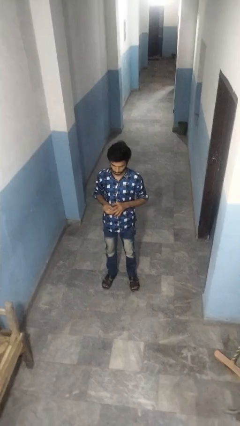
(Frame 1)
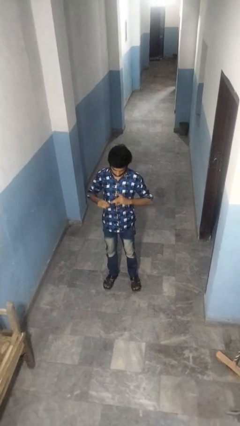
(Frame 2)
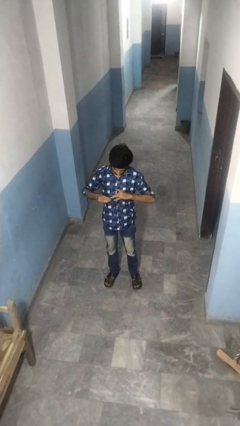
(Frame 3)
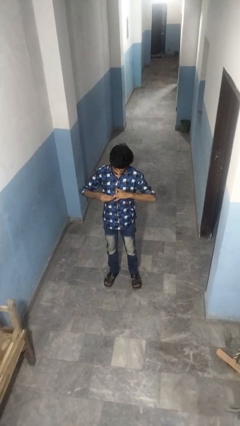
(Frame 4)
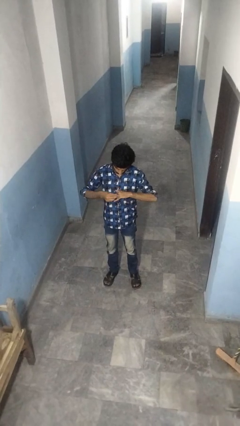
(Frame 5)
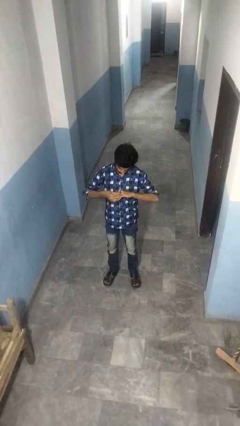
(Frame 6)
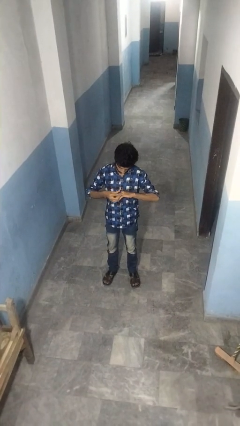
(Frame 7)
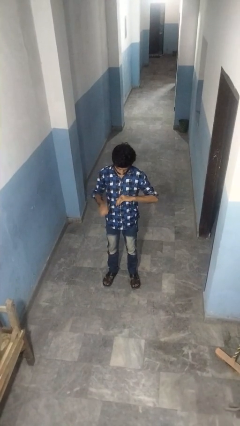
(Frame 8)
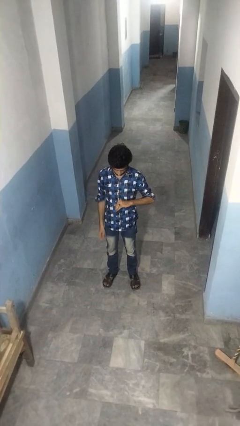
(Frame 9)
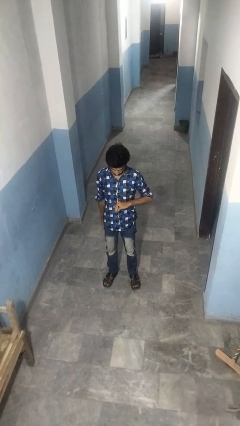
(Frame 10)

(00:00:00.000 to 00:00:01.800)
person puts on ring

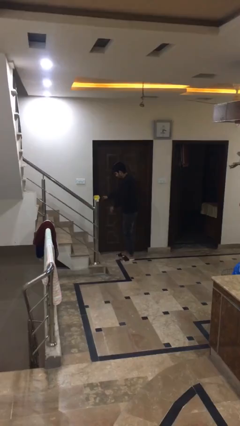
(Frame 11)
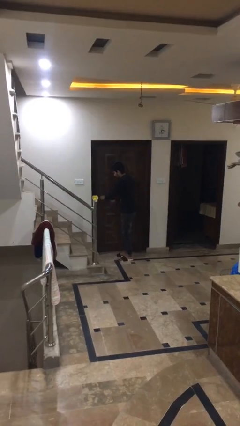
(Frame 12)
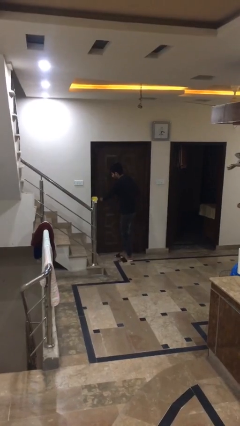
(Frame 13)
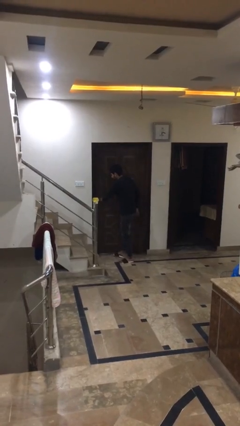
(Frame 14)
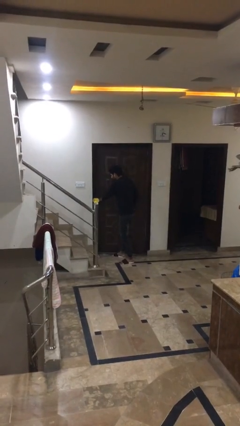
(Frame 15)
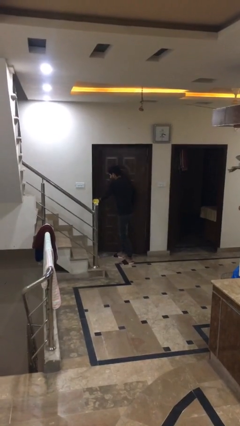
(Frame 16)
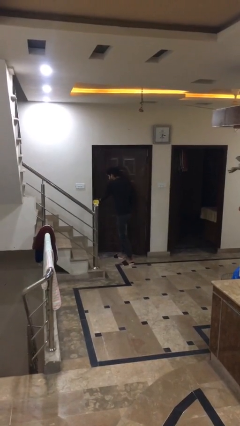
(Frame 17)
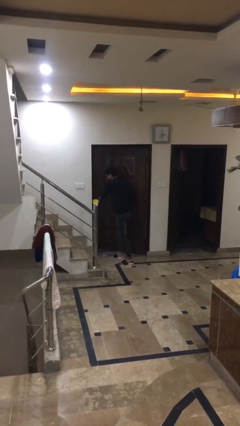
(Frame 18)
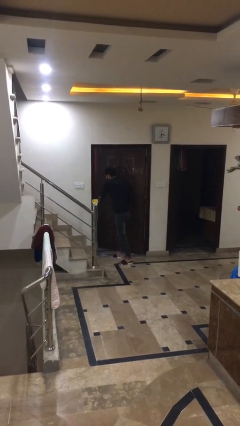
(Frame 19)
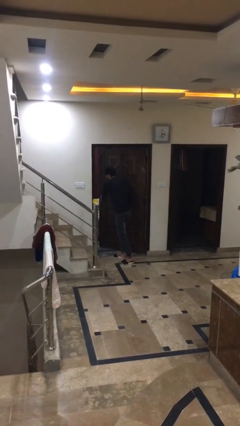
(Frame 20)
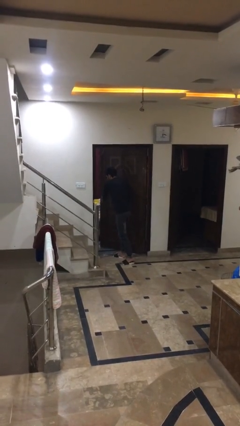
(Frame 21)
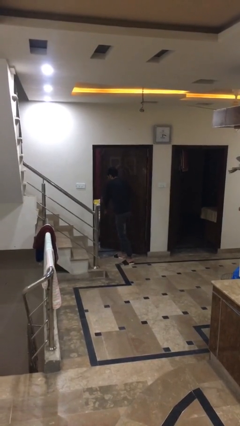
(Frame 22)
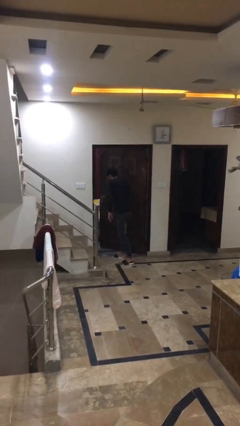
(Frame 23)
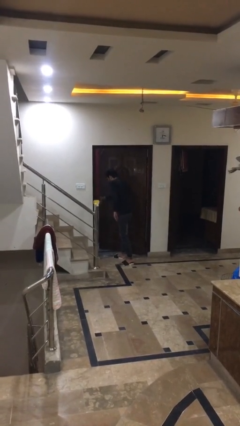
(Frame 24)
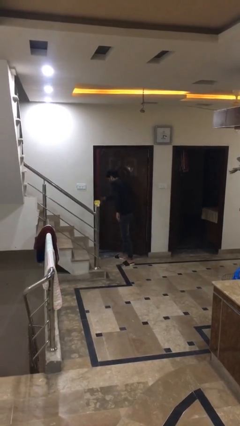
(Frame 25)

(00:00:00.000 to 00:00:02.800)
person opens facility door

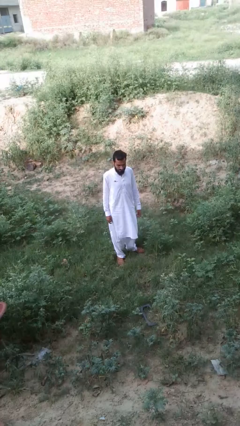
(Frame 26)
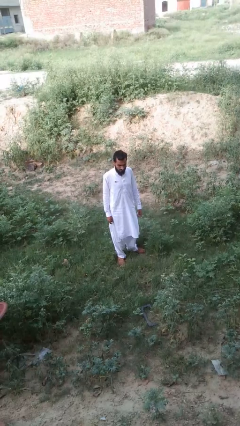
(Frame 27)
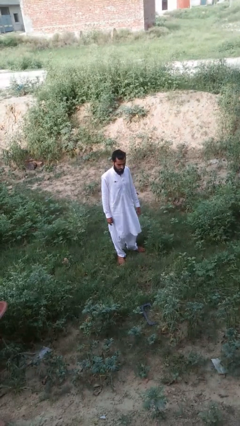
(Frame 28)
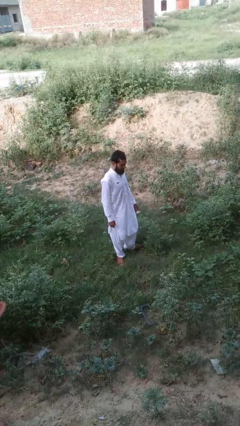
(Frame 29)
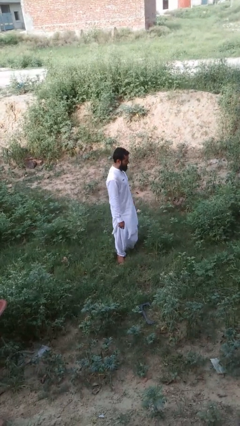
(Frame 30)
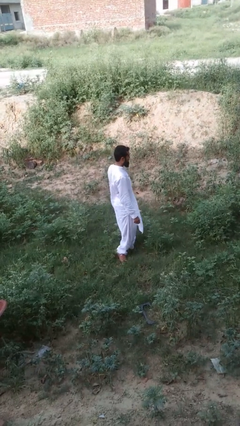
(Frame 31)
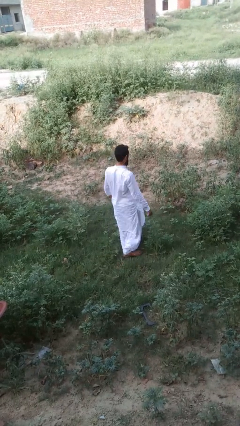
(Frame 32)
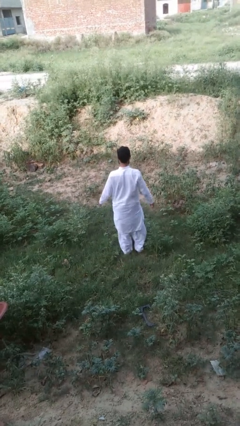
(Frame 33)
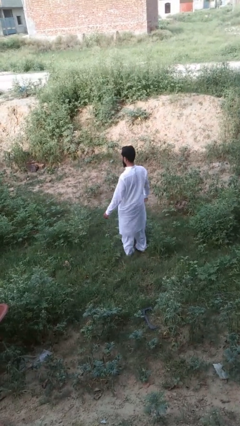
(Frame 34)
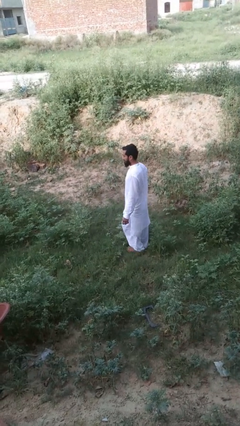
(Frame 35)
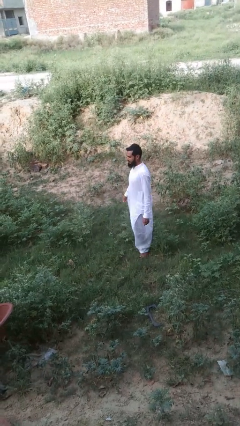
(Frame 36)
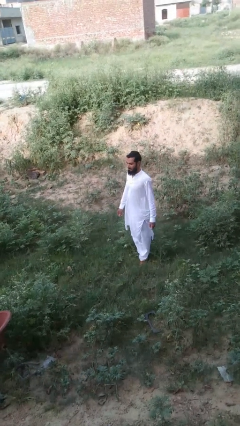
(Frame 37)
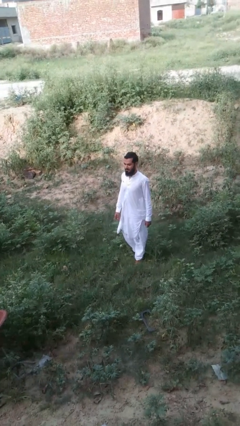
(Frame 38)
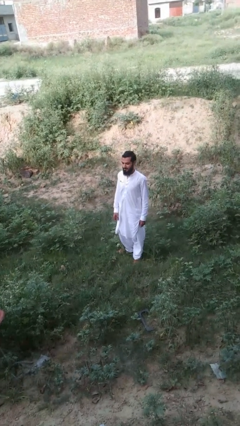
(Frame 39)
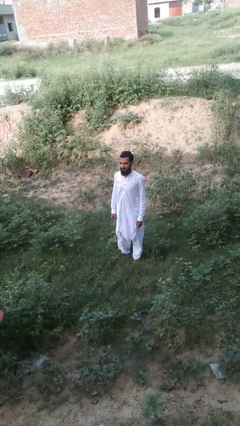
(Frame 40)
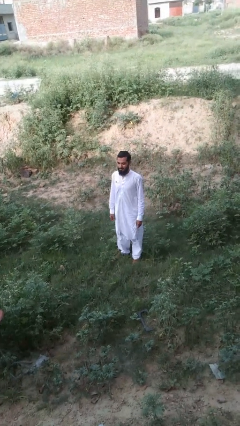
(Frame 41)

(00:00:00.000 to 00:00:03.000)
person twirls

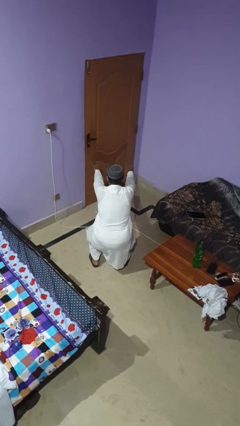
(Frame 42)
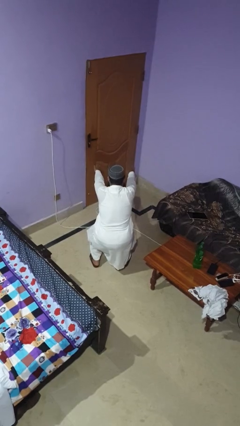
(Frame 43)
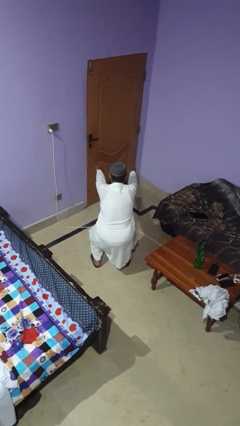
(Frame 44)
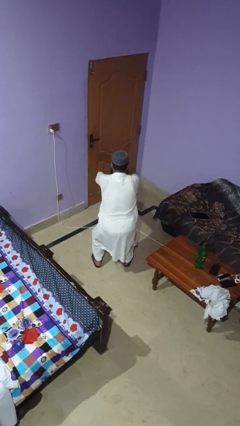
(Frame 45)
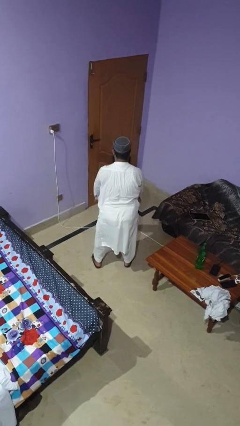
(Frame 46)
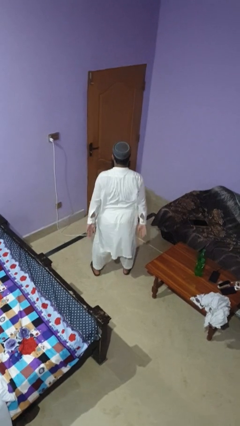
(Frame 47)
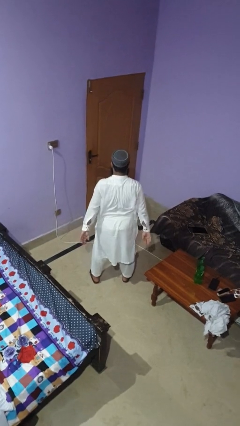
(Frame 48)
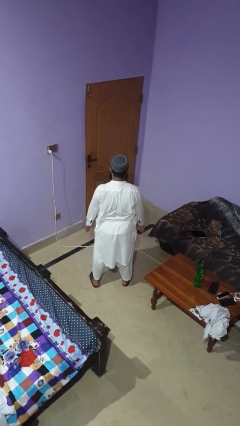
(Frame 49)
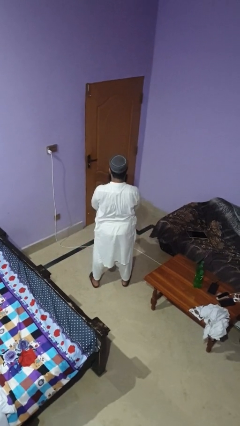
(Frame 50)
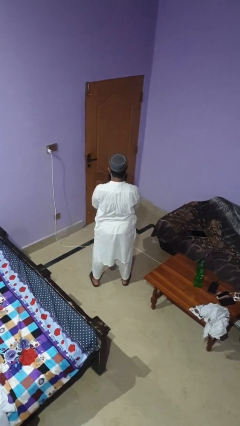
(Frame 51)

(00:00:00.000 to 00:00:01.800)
person stands up

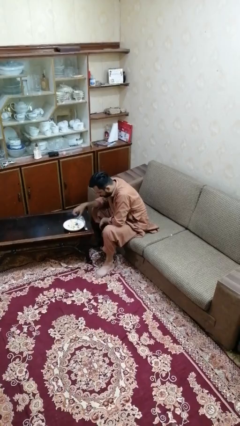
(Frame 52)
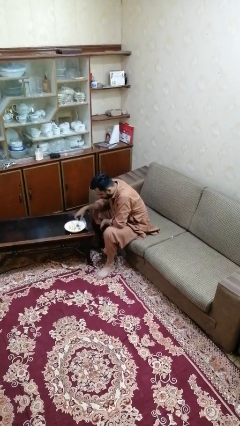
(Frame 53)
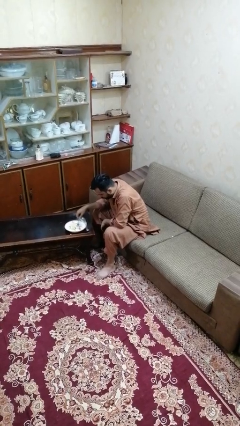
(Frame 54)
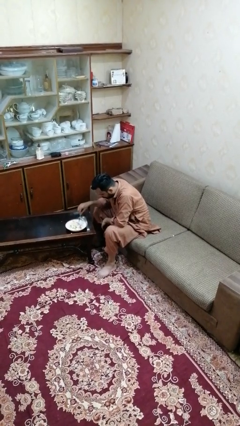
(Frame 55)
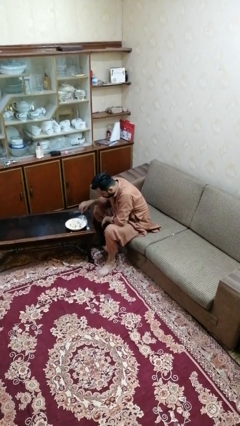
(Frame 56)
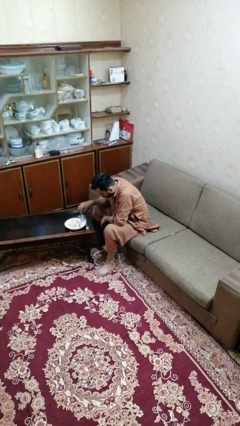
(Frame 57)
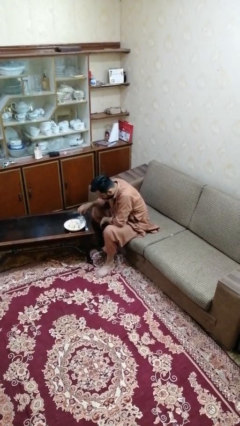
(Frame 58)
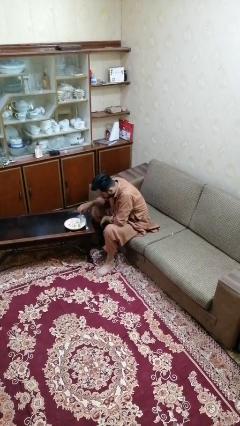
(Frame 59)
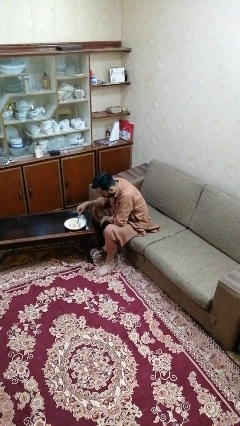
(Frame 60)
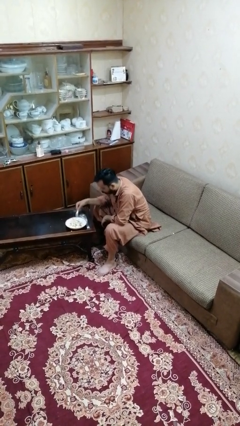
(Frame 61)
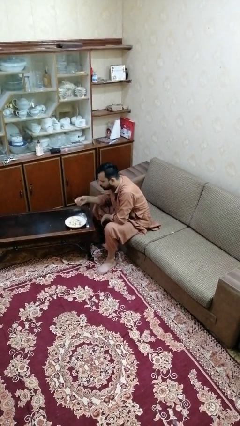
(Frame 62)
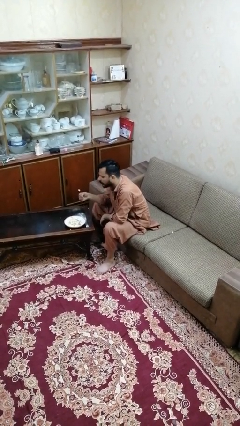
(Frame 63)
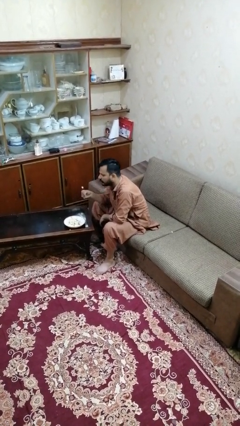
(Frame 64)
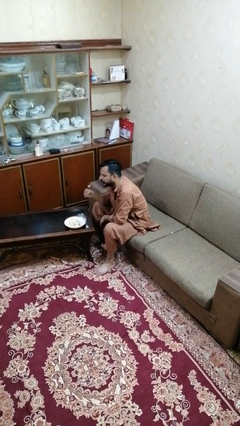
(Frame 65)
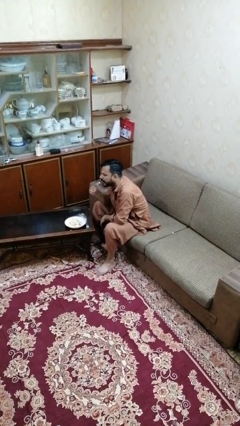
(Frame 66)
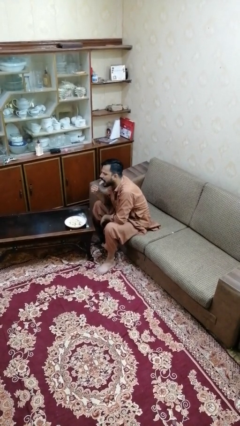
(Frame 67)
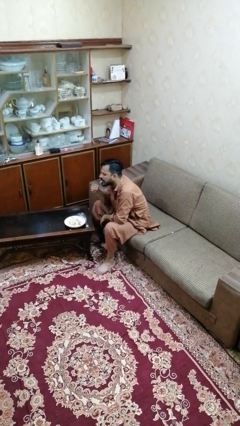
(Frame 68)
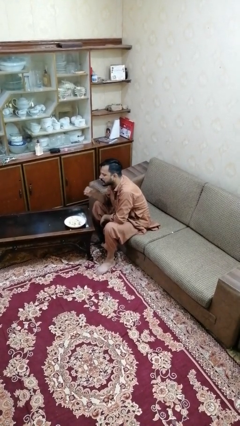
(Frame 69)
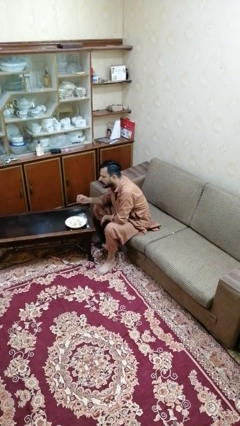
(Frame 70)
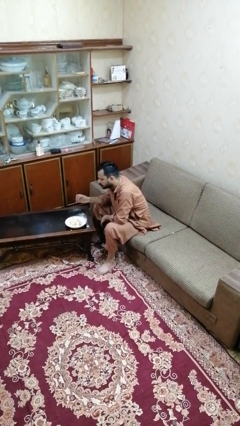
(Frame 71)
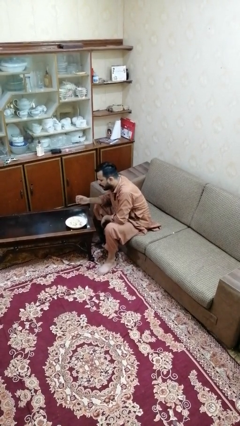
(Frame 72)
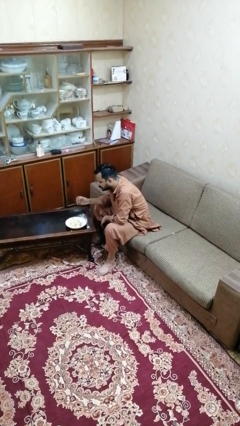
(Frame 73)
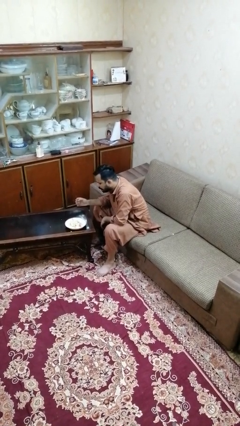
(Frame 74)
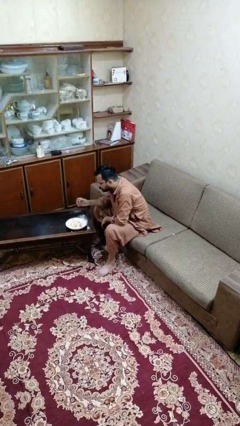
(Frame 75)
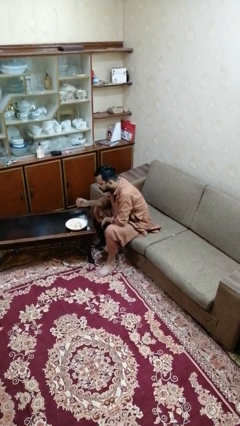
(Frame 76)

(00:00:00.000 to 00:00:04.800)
person eats with utensil

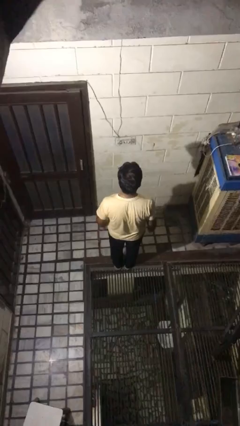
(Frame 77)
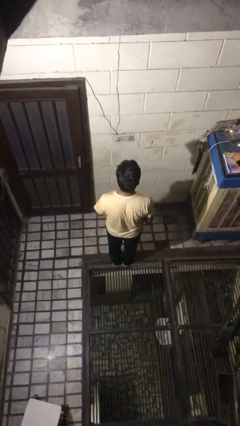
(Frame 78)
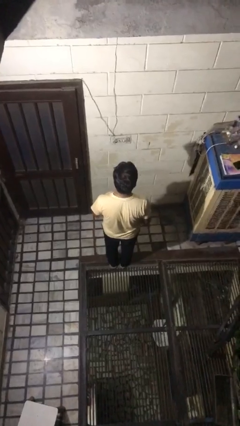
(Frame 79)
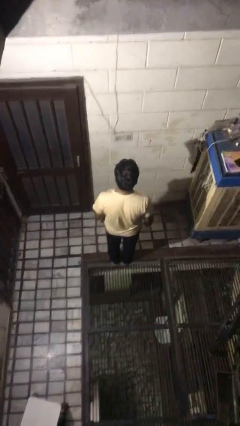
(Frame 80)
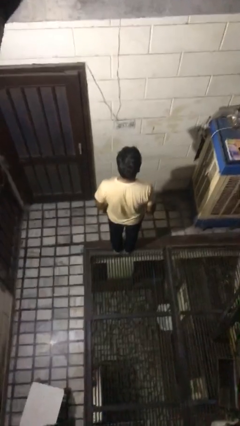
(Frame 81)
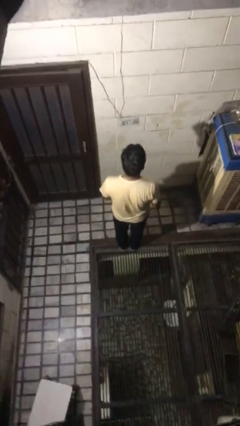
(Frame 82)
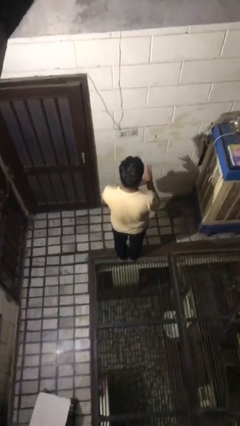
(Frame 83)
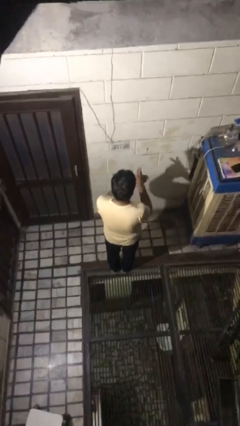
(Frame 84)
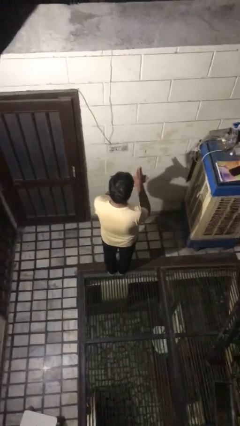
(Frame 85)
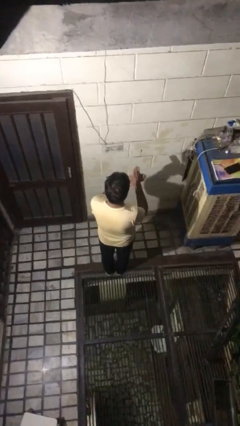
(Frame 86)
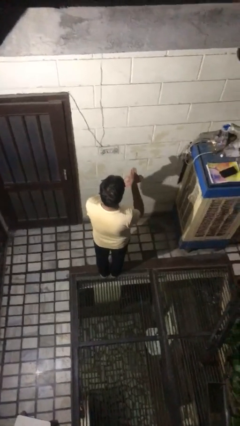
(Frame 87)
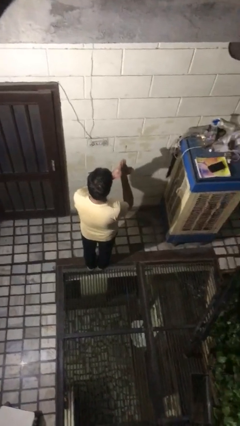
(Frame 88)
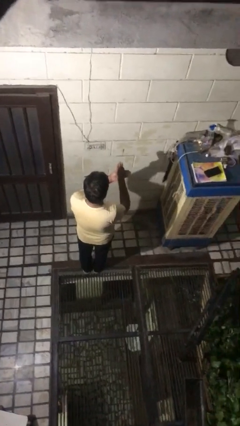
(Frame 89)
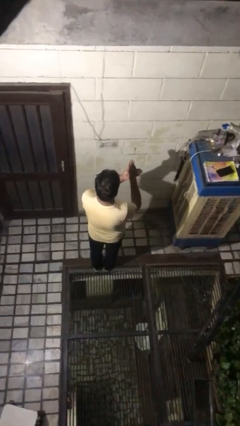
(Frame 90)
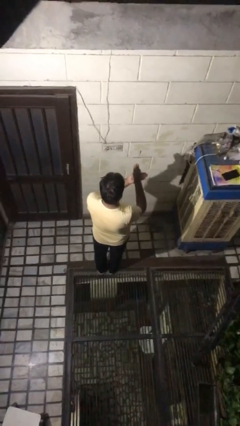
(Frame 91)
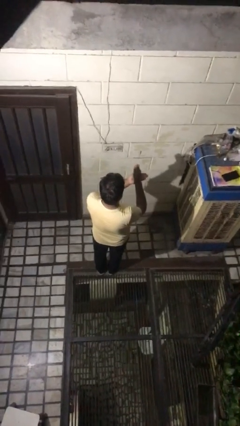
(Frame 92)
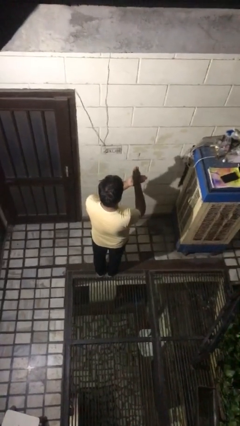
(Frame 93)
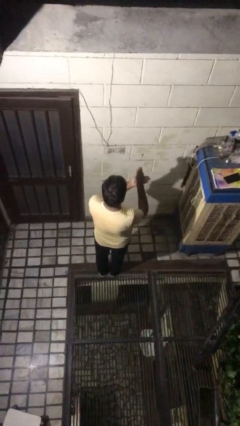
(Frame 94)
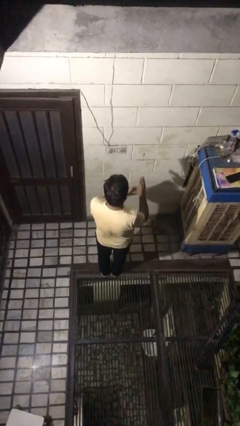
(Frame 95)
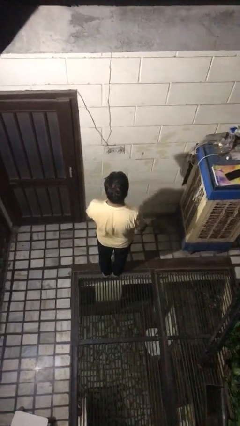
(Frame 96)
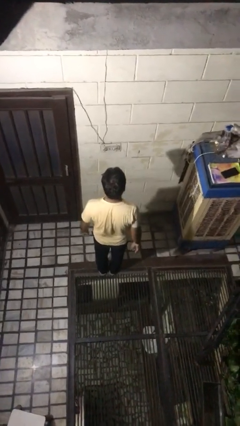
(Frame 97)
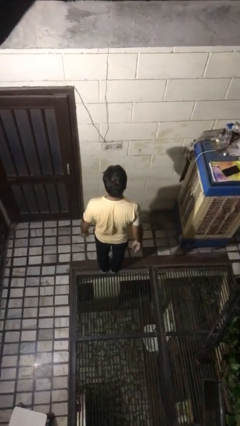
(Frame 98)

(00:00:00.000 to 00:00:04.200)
person gestures number three
